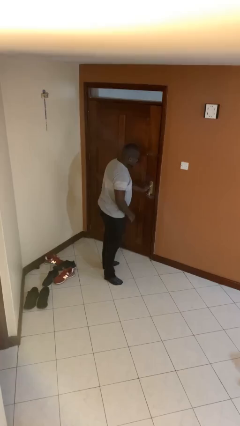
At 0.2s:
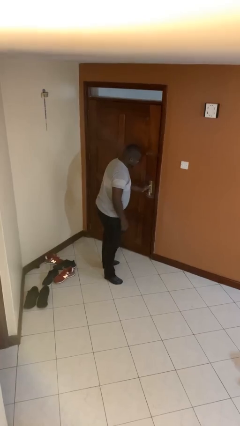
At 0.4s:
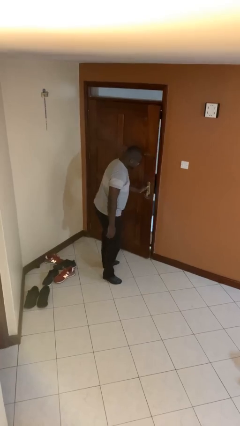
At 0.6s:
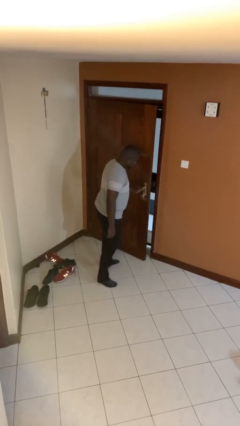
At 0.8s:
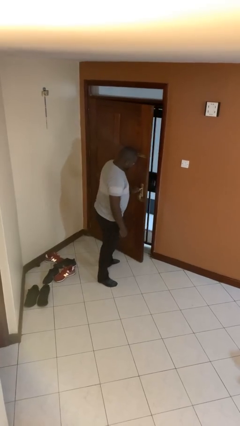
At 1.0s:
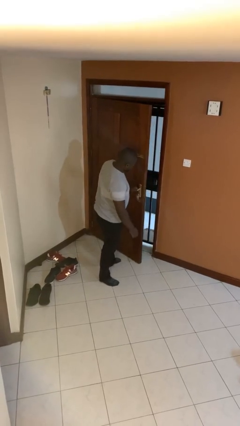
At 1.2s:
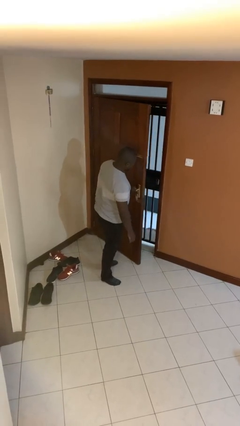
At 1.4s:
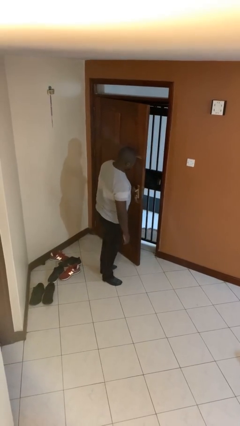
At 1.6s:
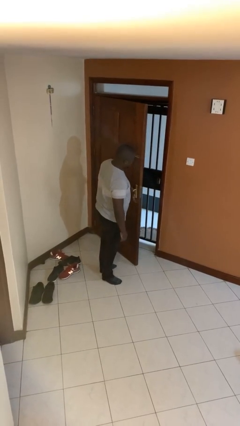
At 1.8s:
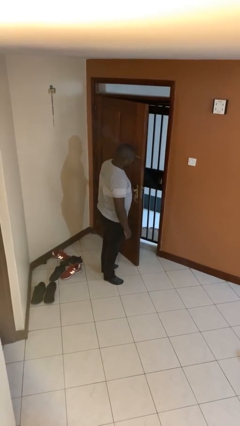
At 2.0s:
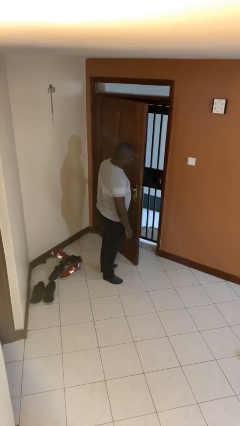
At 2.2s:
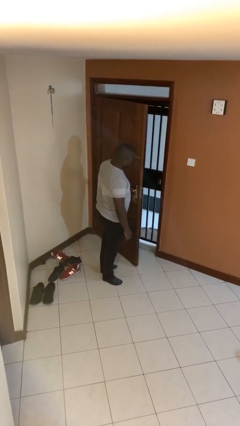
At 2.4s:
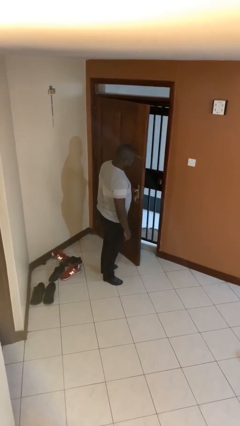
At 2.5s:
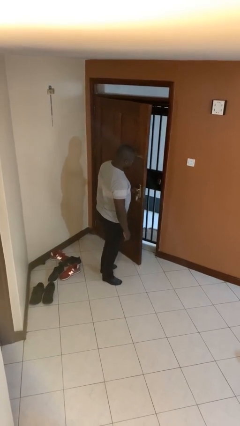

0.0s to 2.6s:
person opens facility door

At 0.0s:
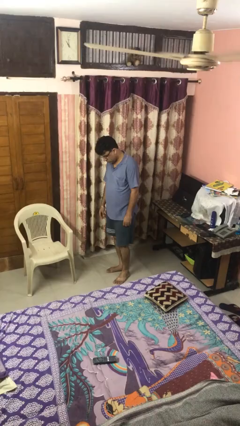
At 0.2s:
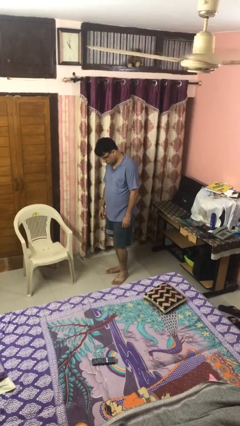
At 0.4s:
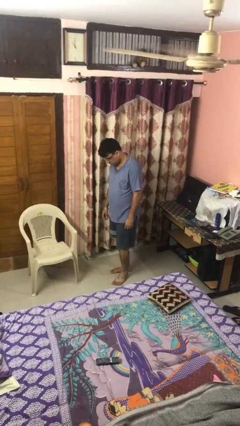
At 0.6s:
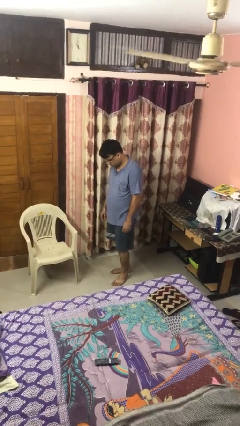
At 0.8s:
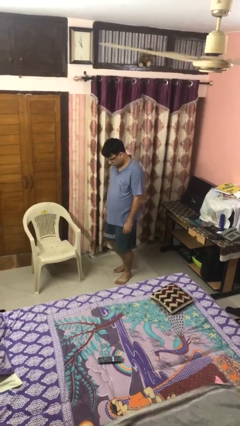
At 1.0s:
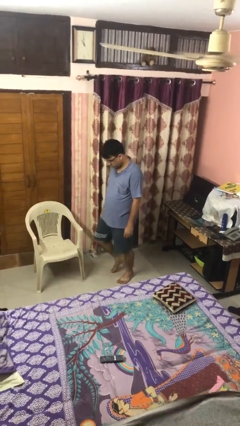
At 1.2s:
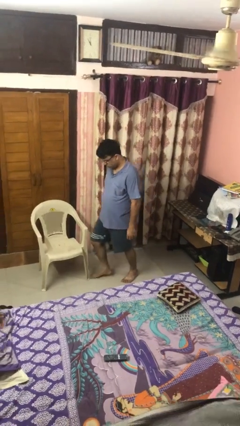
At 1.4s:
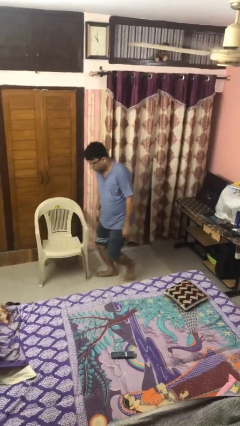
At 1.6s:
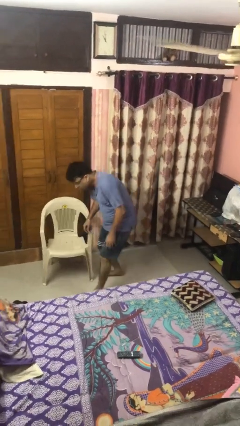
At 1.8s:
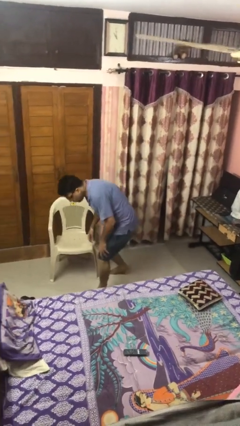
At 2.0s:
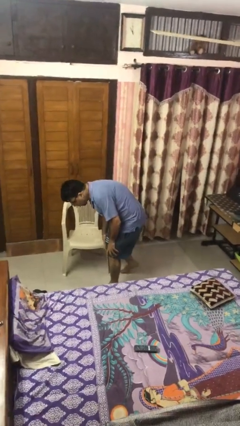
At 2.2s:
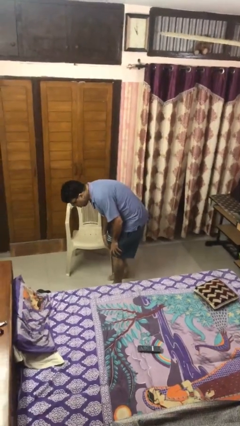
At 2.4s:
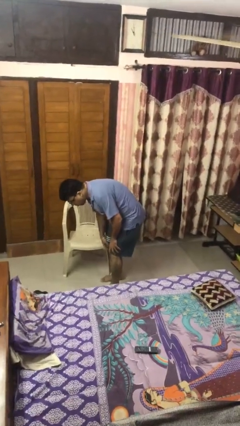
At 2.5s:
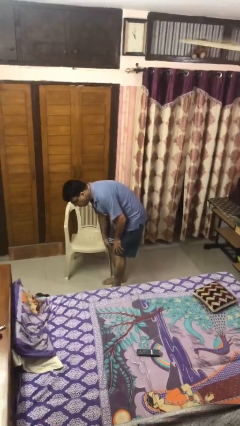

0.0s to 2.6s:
person stubs toe

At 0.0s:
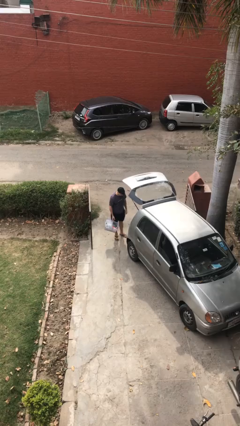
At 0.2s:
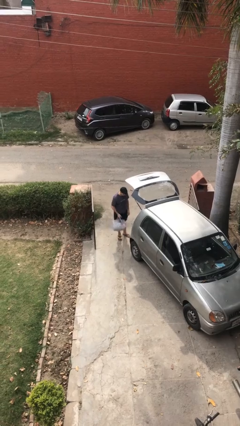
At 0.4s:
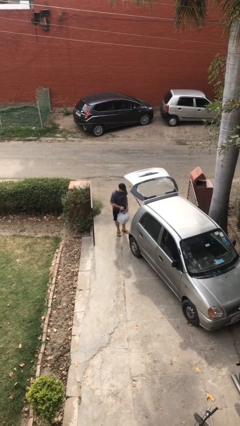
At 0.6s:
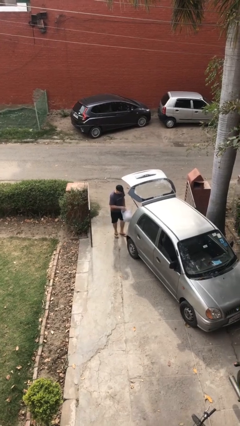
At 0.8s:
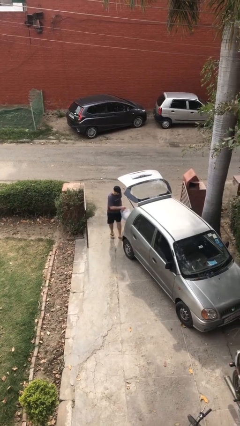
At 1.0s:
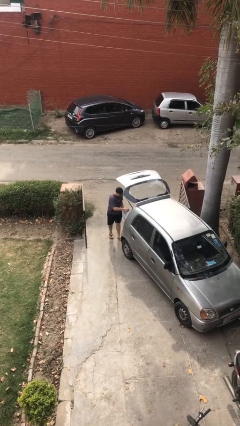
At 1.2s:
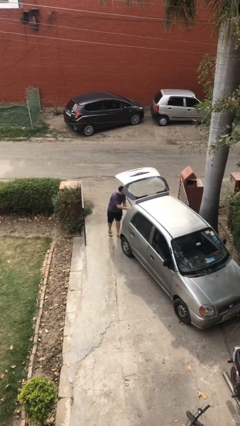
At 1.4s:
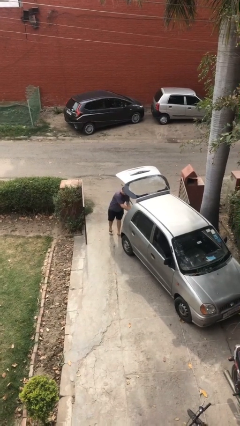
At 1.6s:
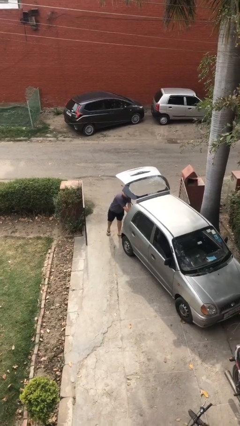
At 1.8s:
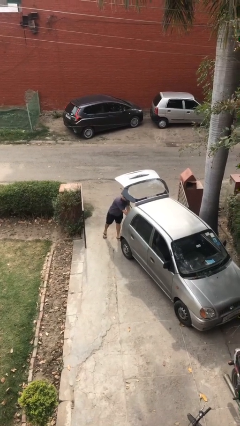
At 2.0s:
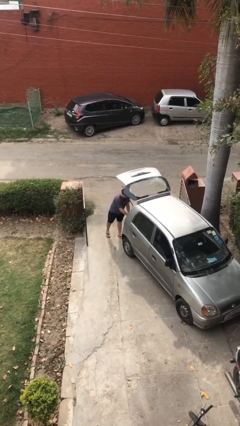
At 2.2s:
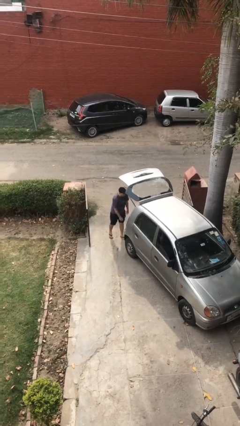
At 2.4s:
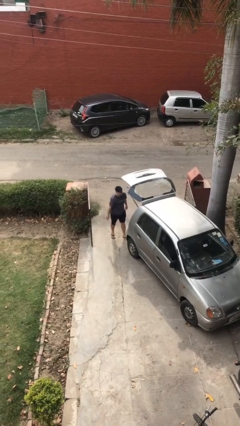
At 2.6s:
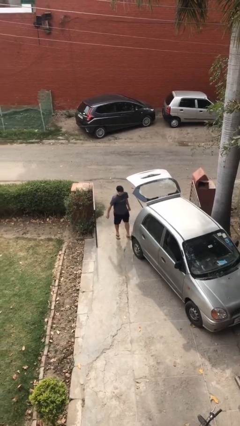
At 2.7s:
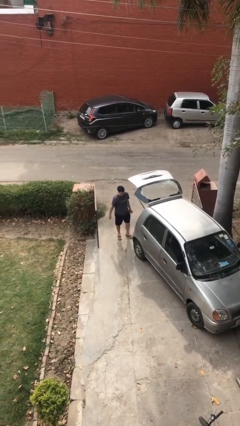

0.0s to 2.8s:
person loads car

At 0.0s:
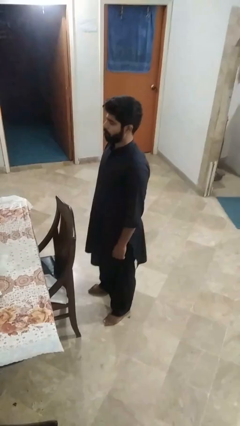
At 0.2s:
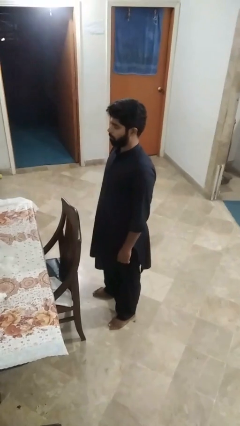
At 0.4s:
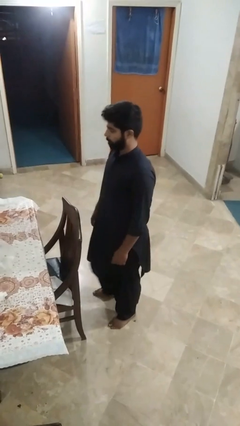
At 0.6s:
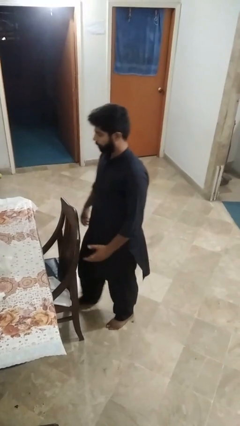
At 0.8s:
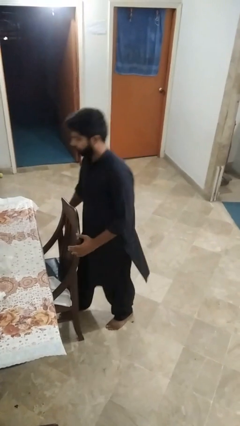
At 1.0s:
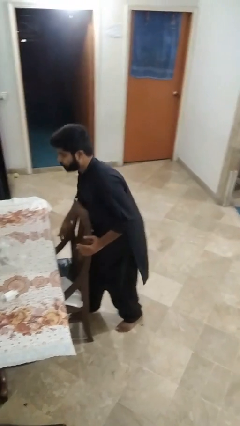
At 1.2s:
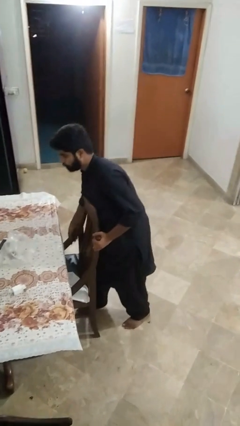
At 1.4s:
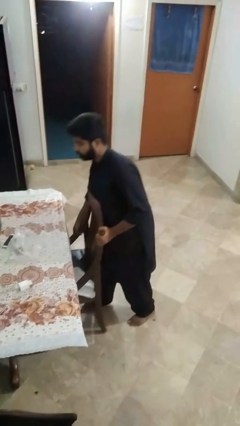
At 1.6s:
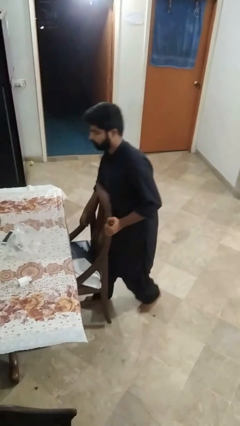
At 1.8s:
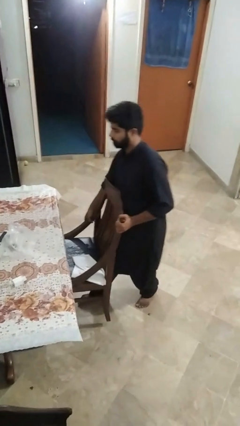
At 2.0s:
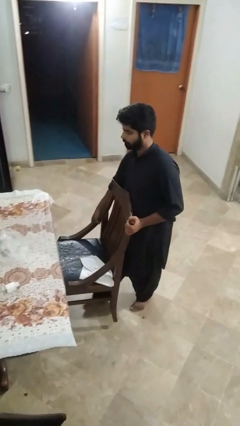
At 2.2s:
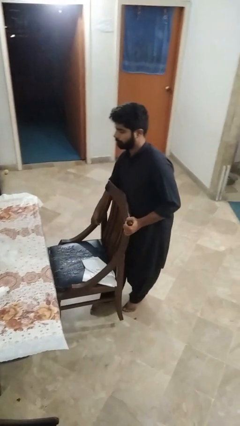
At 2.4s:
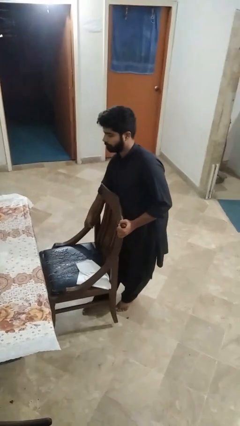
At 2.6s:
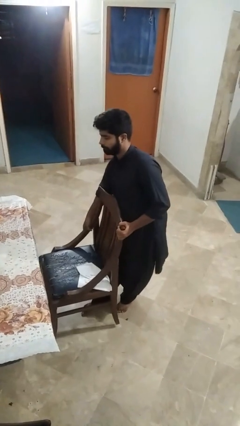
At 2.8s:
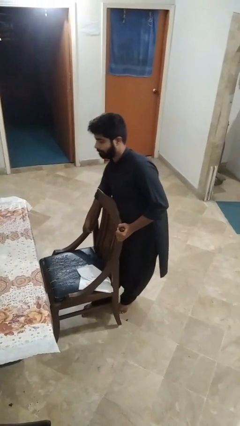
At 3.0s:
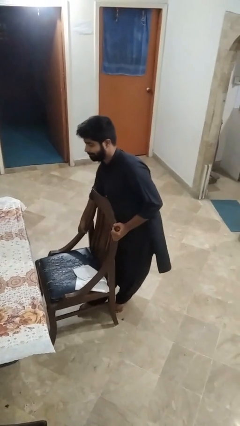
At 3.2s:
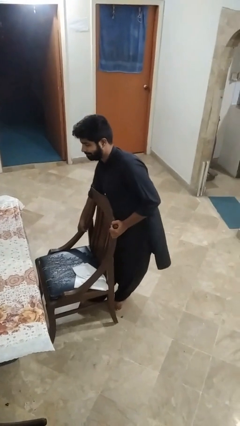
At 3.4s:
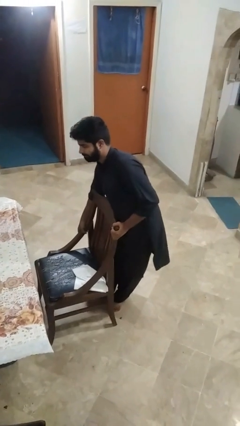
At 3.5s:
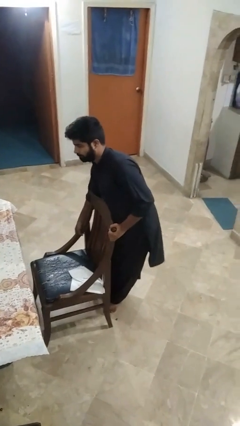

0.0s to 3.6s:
person pulls out chair

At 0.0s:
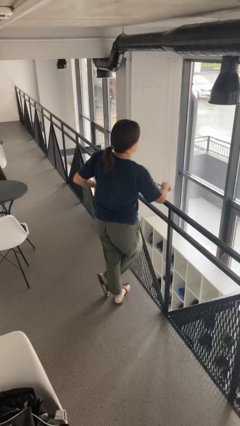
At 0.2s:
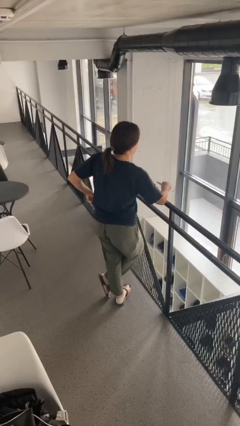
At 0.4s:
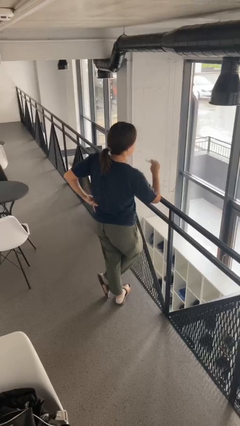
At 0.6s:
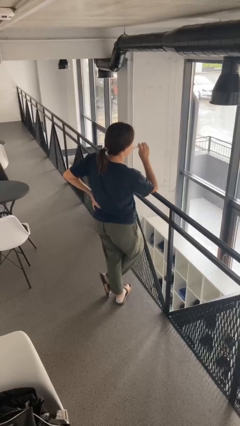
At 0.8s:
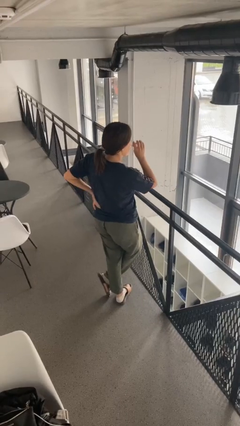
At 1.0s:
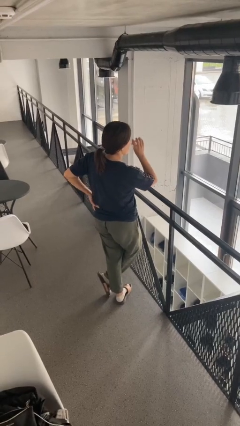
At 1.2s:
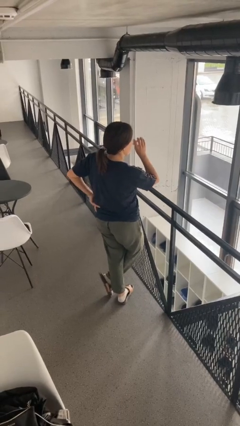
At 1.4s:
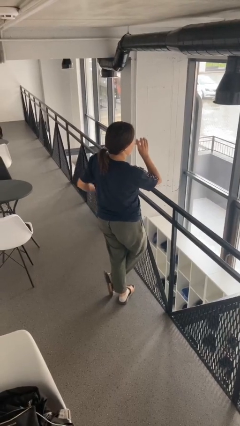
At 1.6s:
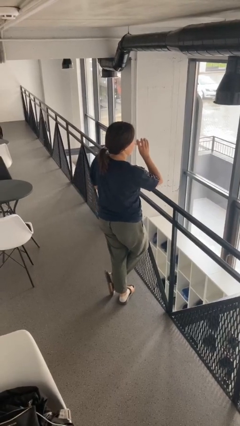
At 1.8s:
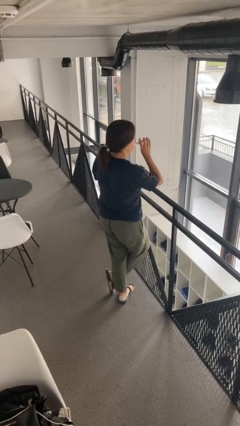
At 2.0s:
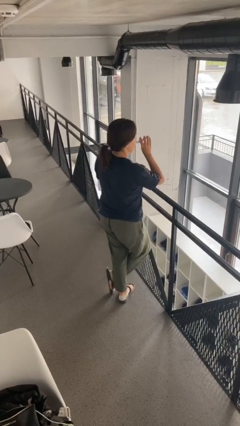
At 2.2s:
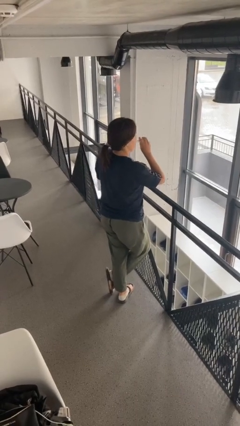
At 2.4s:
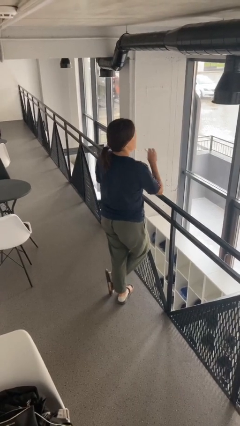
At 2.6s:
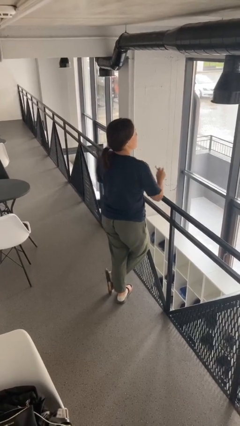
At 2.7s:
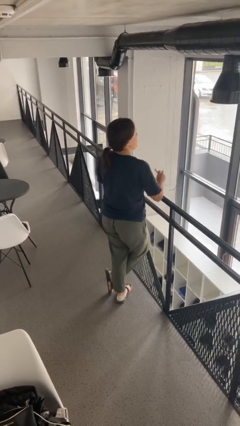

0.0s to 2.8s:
person vapes

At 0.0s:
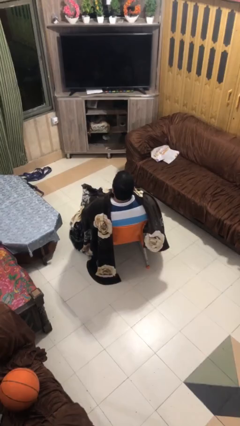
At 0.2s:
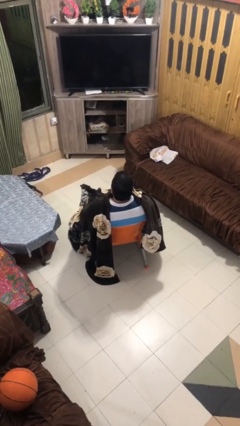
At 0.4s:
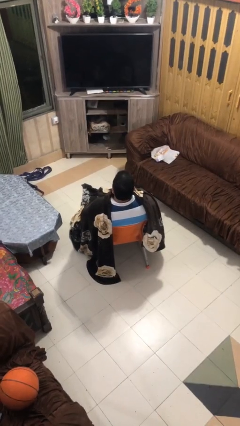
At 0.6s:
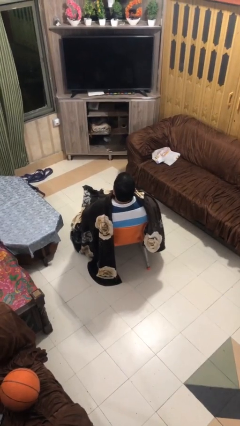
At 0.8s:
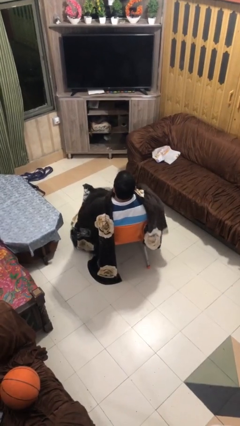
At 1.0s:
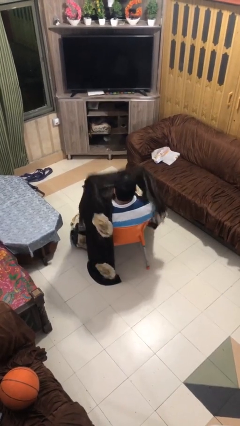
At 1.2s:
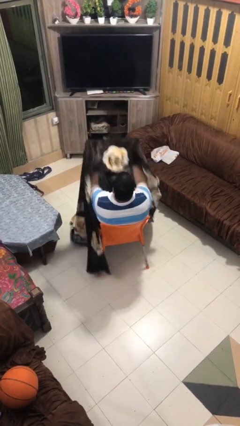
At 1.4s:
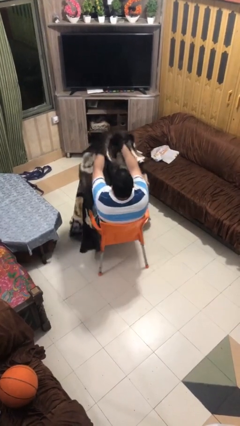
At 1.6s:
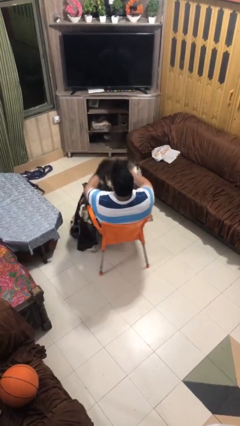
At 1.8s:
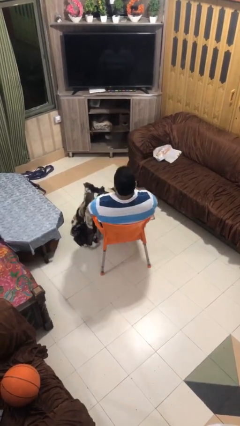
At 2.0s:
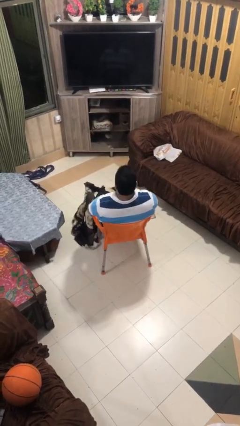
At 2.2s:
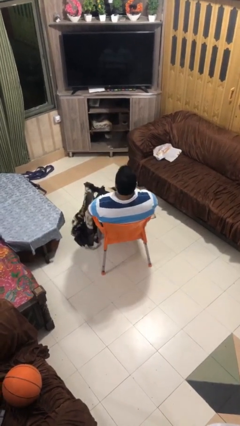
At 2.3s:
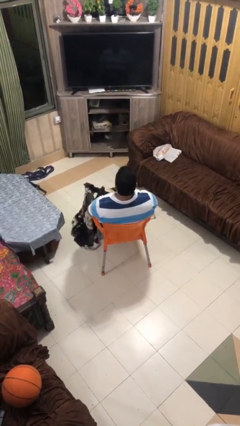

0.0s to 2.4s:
person uncovers with blanket

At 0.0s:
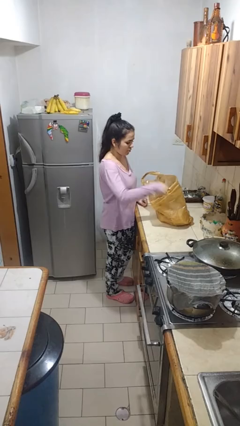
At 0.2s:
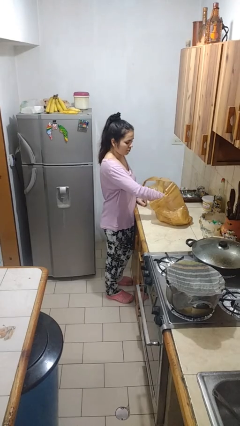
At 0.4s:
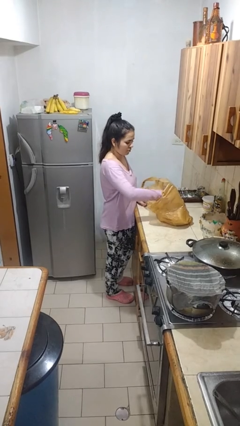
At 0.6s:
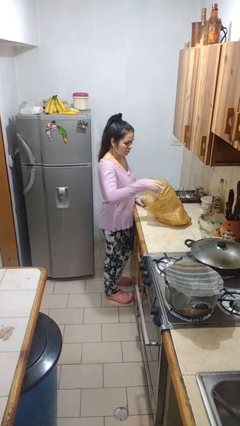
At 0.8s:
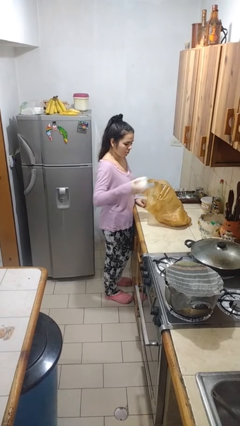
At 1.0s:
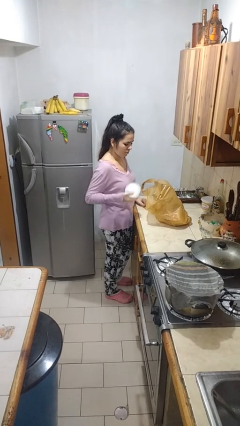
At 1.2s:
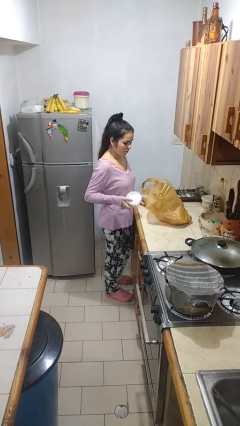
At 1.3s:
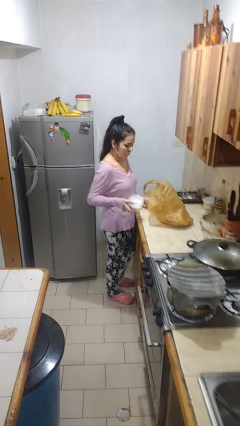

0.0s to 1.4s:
person takes object from bag
